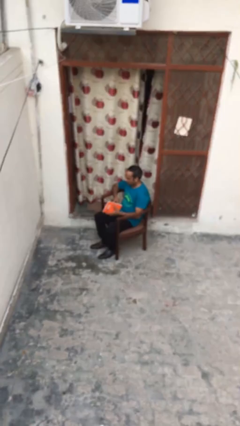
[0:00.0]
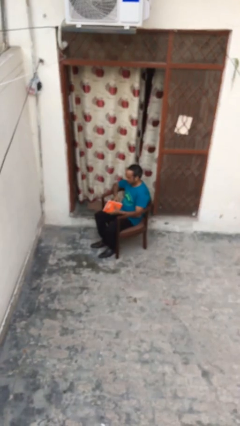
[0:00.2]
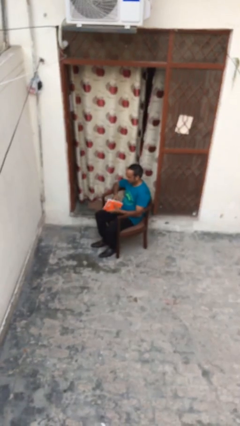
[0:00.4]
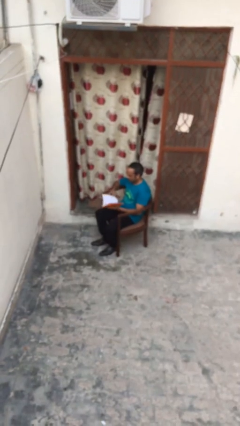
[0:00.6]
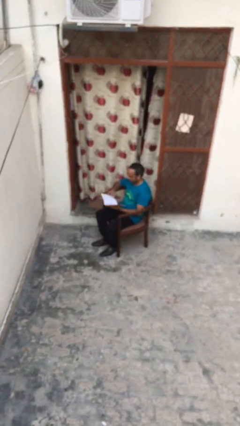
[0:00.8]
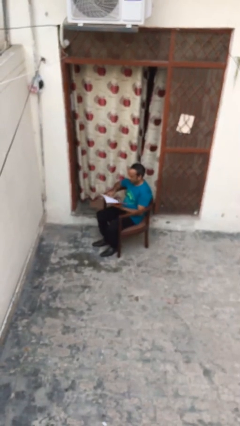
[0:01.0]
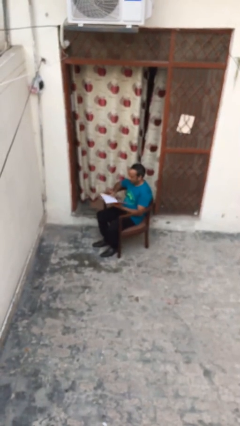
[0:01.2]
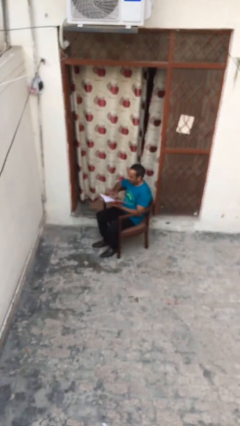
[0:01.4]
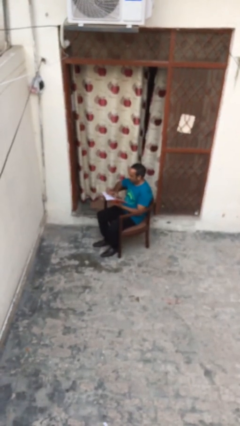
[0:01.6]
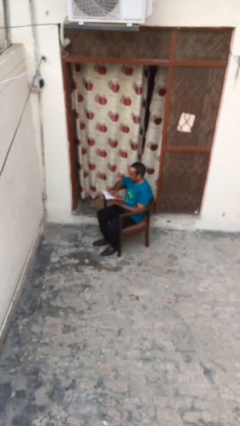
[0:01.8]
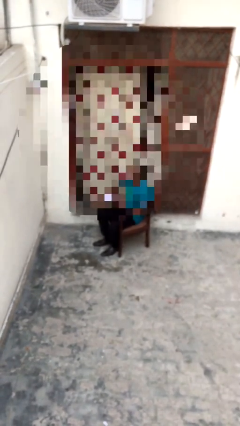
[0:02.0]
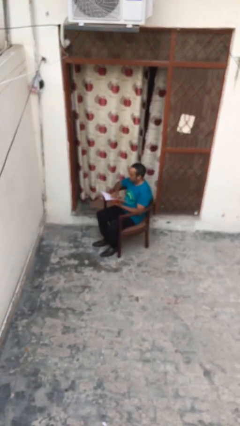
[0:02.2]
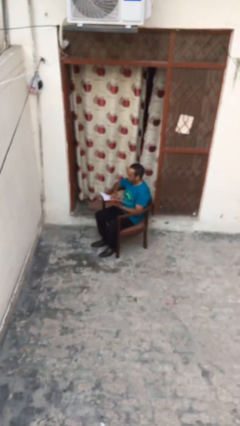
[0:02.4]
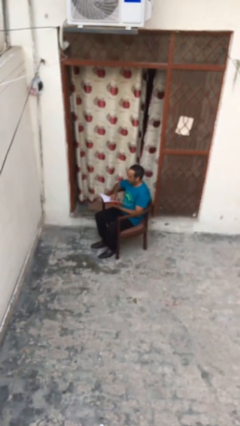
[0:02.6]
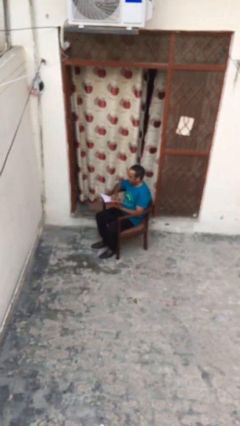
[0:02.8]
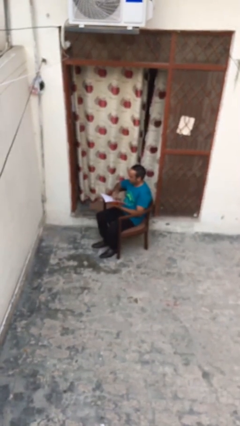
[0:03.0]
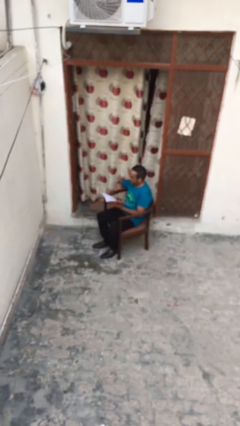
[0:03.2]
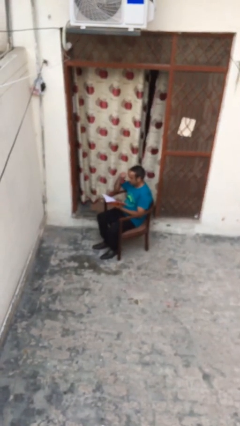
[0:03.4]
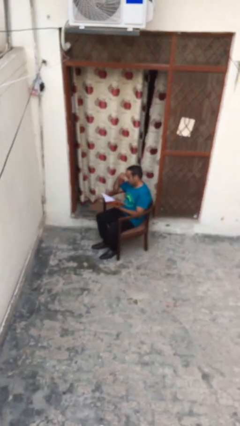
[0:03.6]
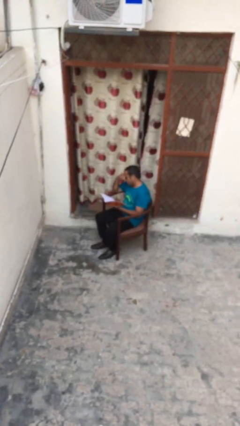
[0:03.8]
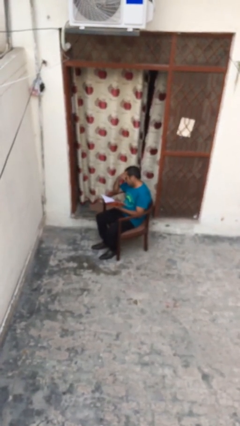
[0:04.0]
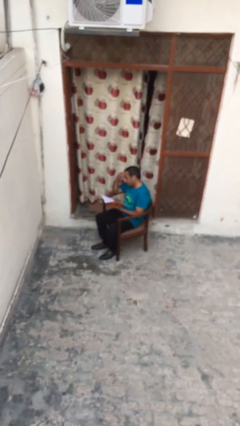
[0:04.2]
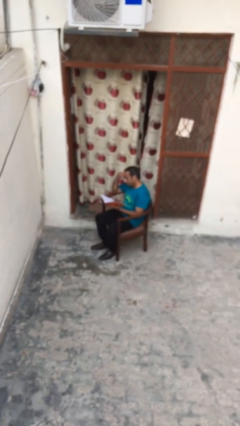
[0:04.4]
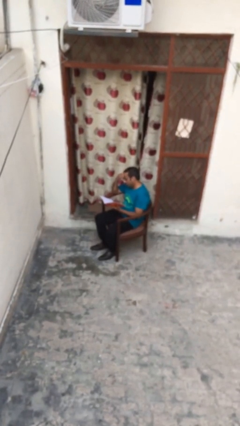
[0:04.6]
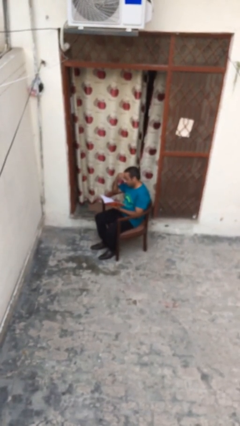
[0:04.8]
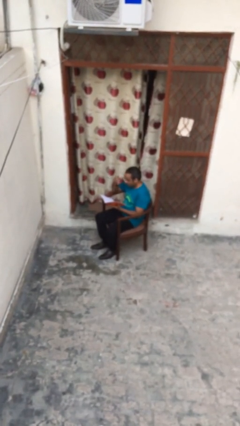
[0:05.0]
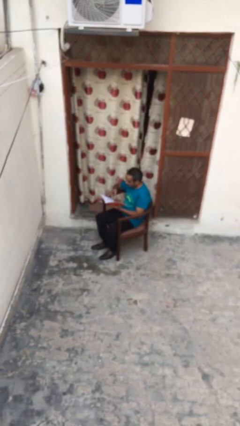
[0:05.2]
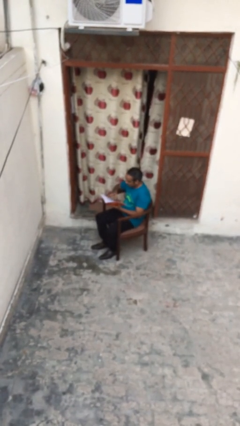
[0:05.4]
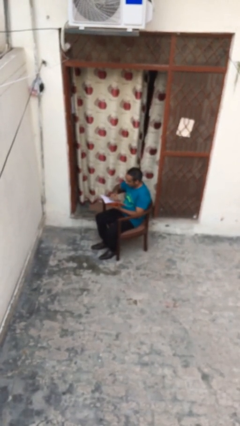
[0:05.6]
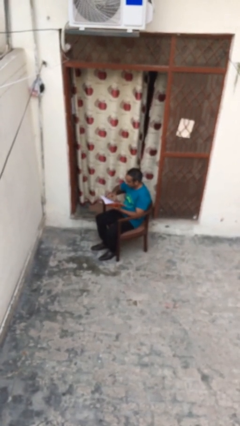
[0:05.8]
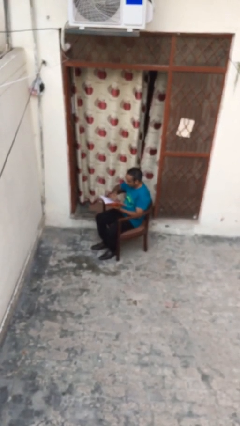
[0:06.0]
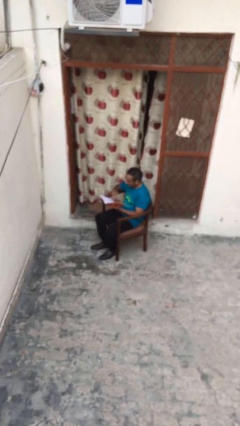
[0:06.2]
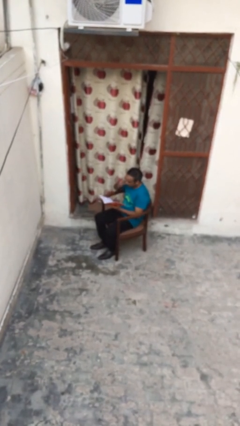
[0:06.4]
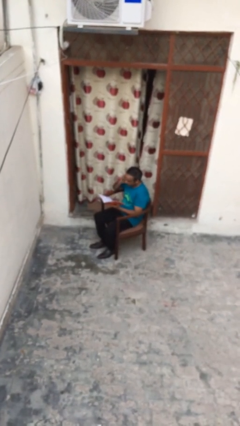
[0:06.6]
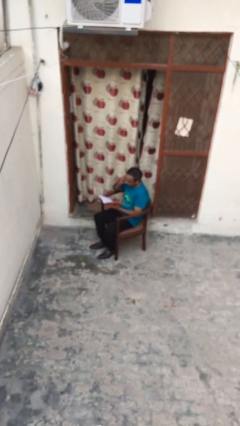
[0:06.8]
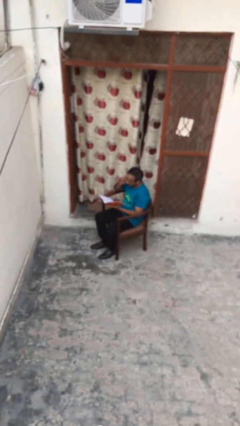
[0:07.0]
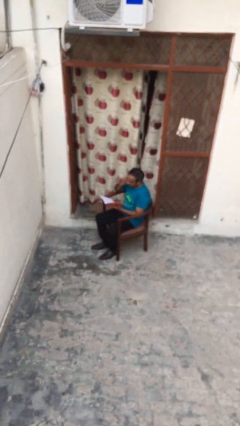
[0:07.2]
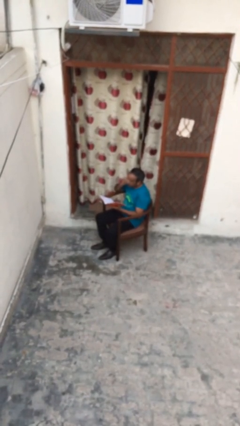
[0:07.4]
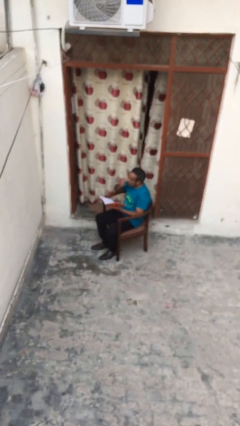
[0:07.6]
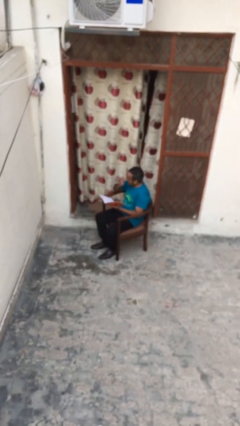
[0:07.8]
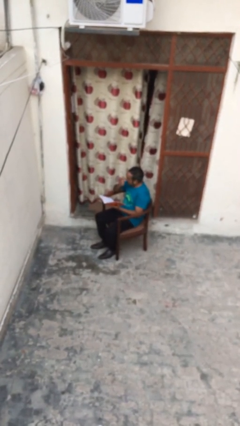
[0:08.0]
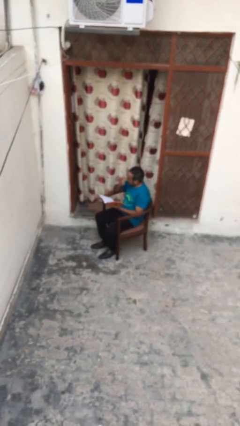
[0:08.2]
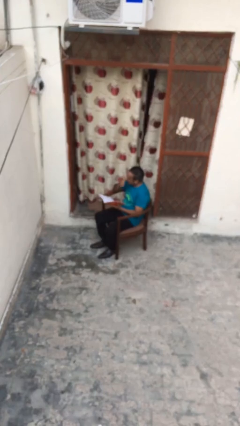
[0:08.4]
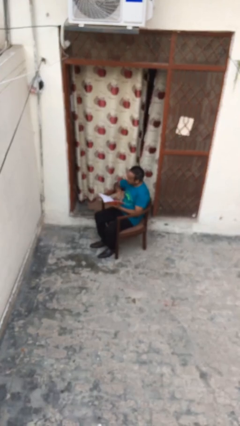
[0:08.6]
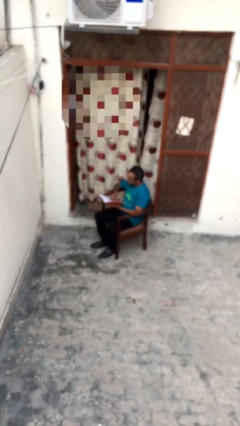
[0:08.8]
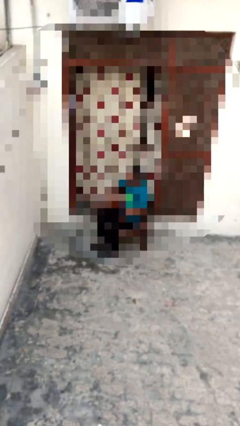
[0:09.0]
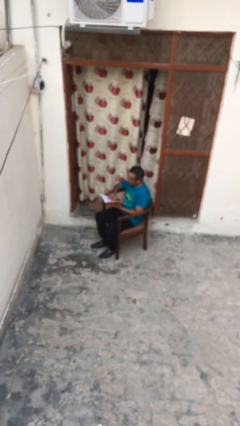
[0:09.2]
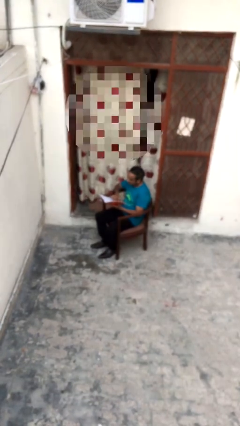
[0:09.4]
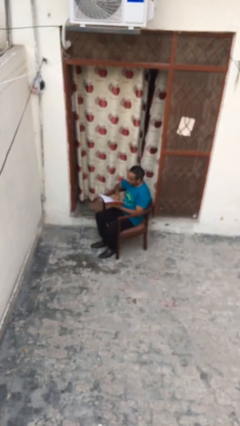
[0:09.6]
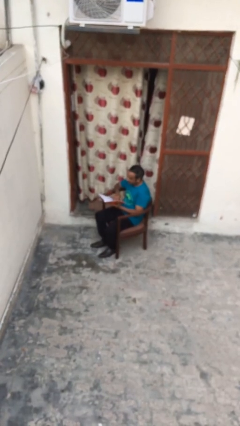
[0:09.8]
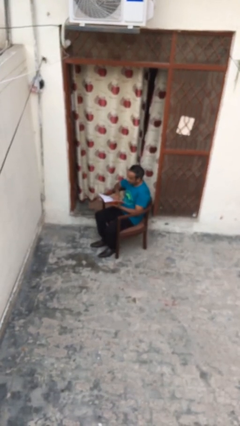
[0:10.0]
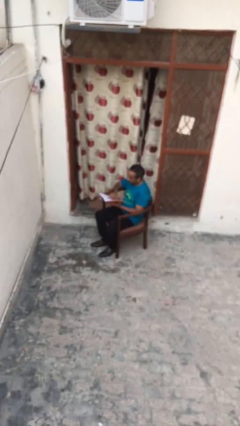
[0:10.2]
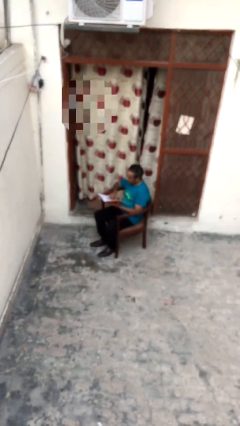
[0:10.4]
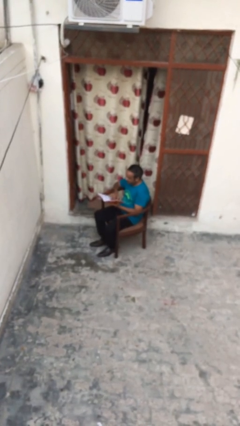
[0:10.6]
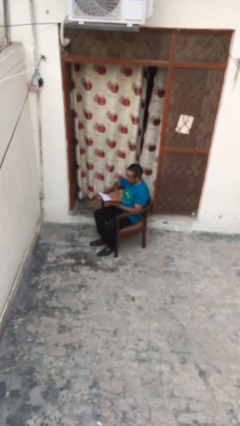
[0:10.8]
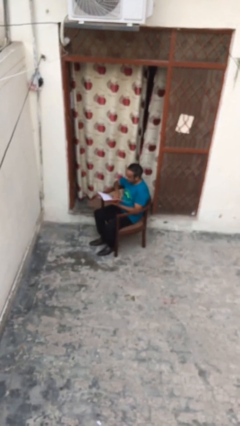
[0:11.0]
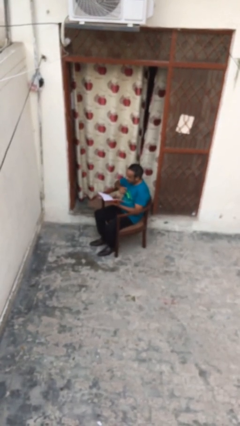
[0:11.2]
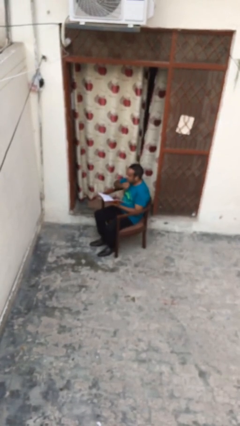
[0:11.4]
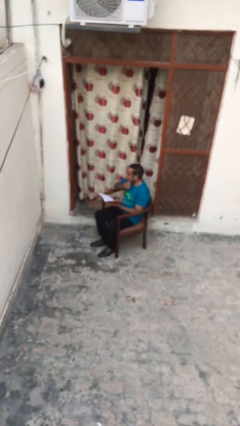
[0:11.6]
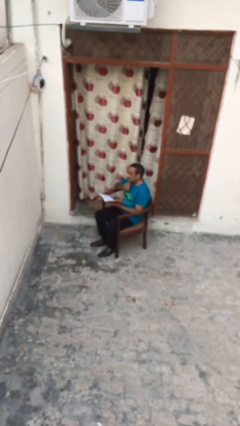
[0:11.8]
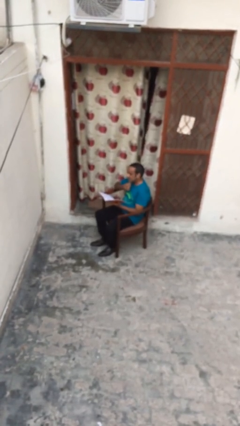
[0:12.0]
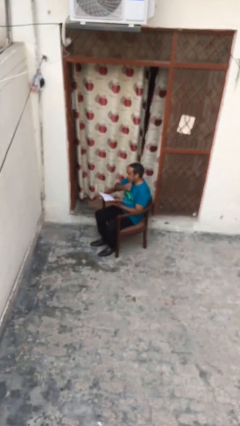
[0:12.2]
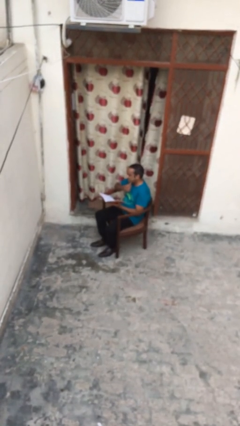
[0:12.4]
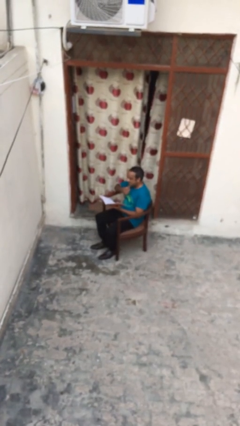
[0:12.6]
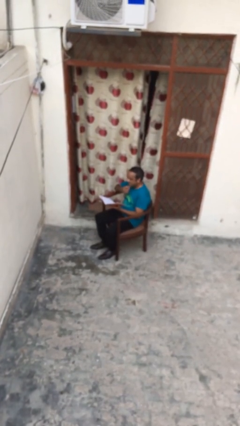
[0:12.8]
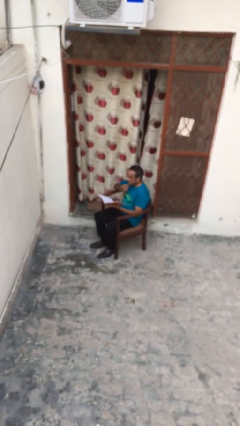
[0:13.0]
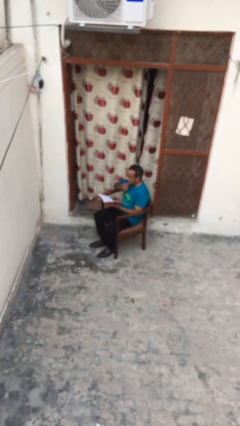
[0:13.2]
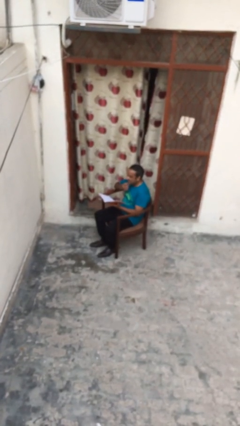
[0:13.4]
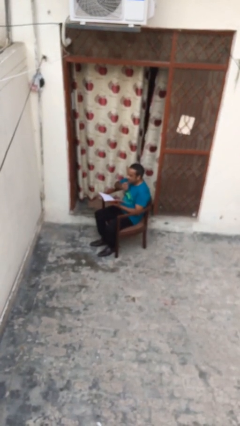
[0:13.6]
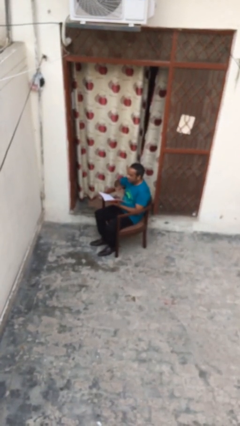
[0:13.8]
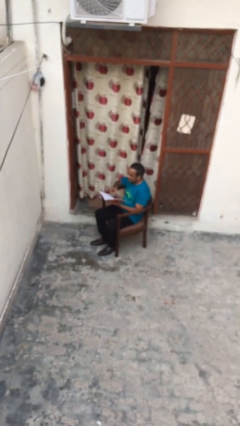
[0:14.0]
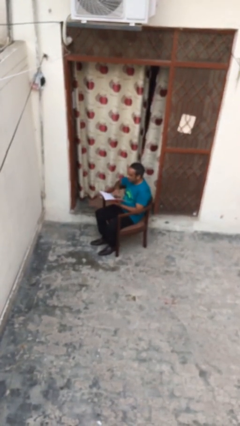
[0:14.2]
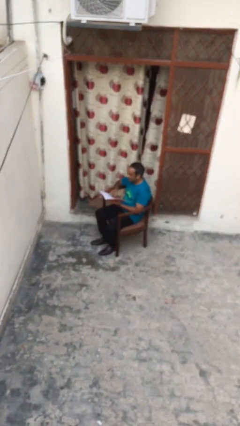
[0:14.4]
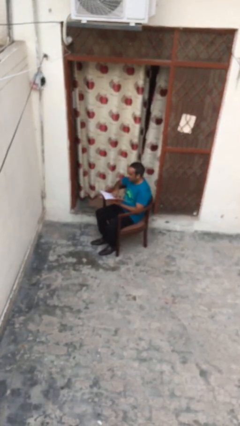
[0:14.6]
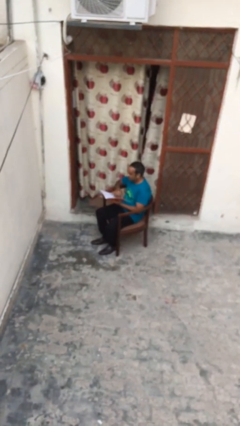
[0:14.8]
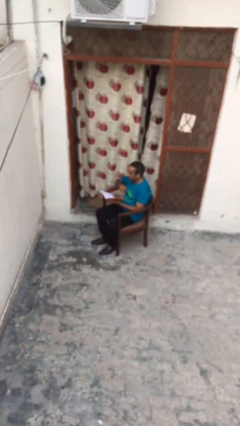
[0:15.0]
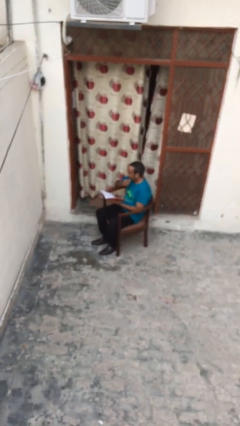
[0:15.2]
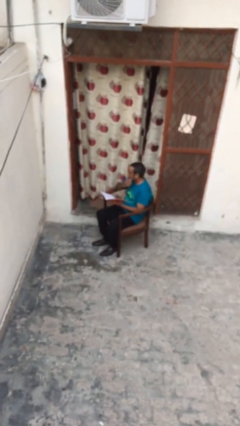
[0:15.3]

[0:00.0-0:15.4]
person reads document

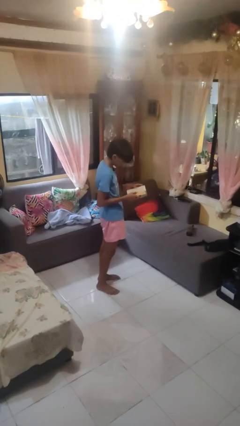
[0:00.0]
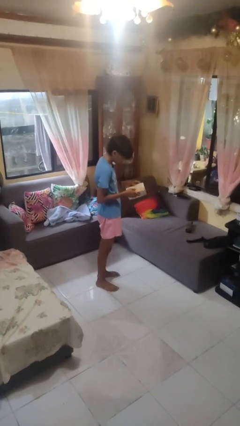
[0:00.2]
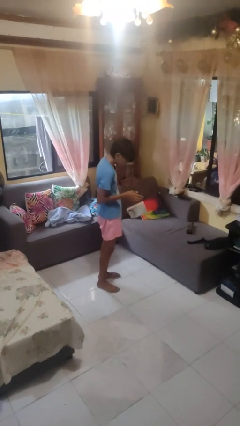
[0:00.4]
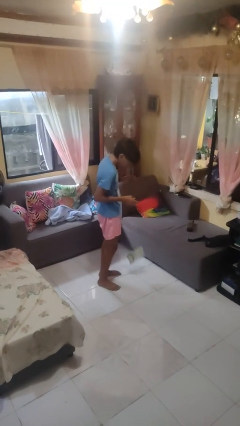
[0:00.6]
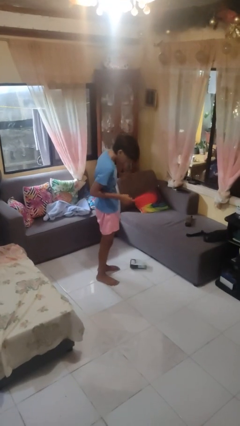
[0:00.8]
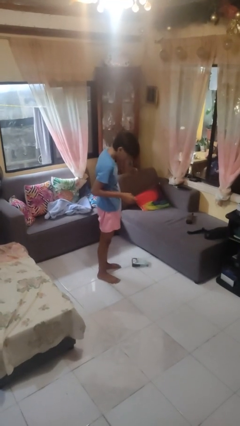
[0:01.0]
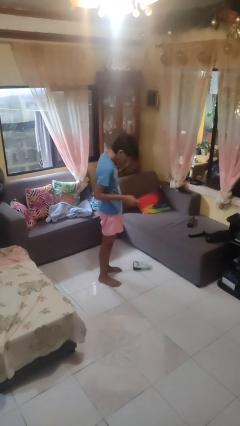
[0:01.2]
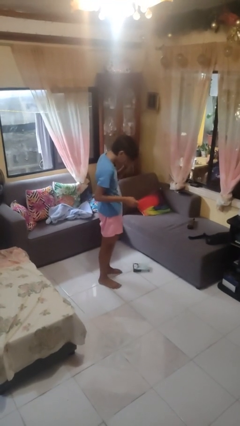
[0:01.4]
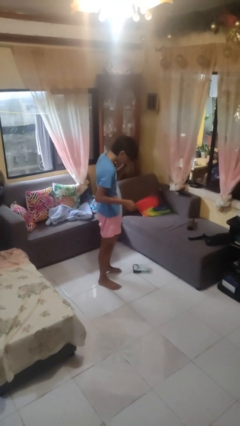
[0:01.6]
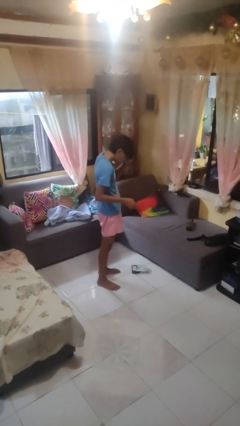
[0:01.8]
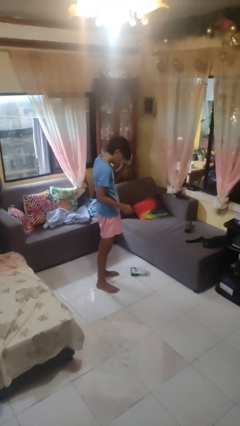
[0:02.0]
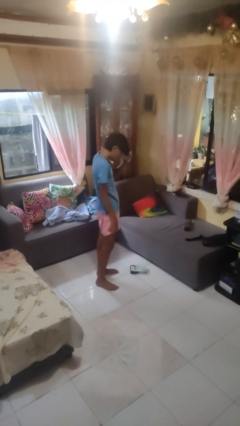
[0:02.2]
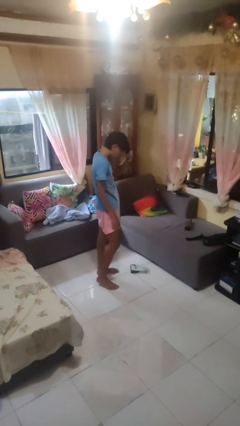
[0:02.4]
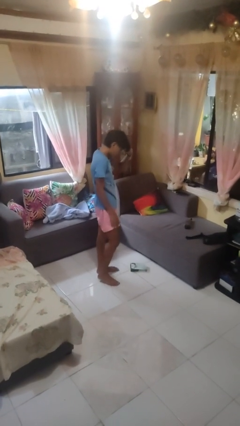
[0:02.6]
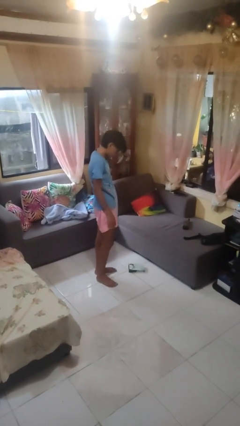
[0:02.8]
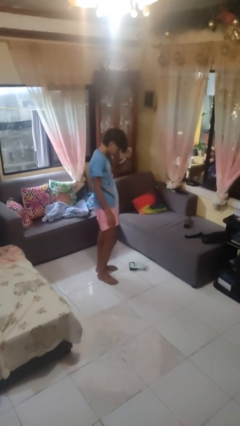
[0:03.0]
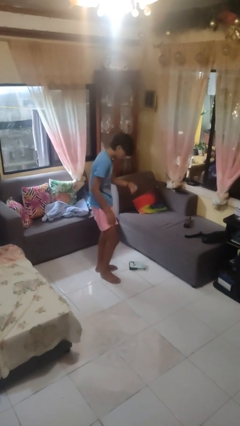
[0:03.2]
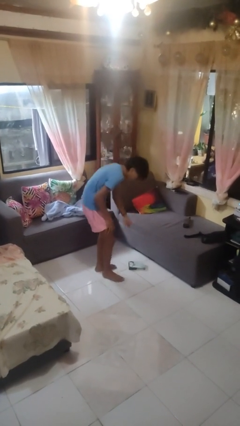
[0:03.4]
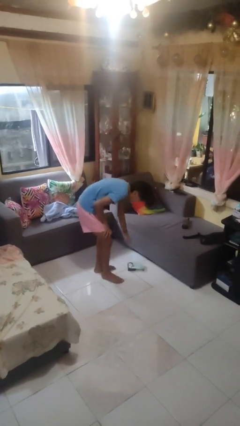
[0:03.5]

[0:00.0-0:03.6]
person drops object
